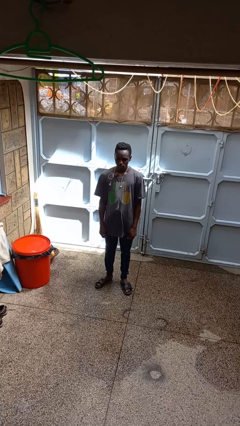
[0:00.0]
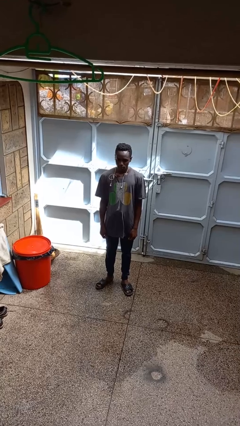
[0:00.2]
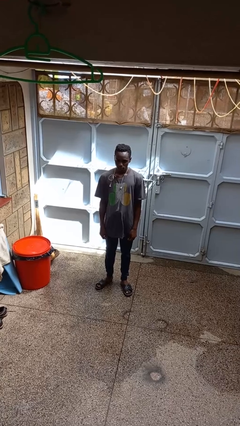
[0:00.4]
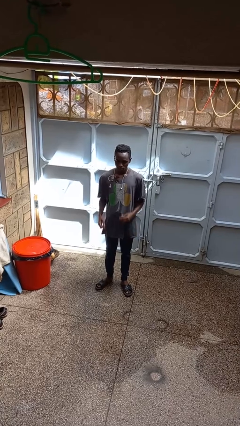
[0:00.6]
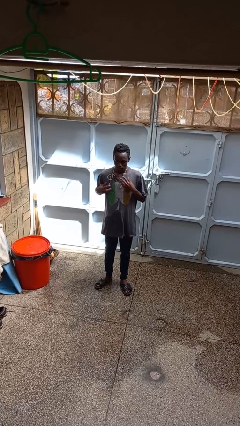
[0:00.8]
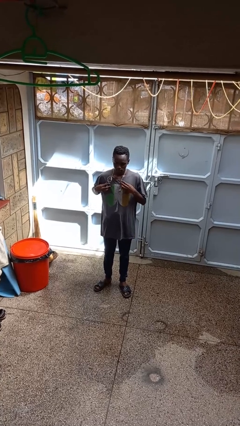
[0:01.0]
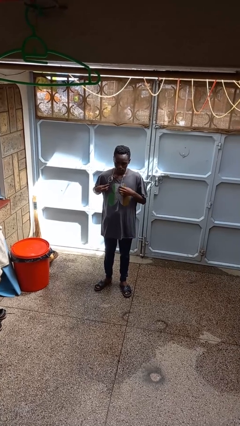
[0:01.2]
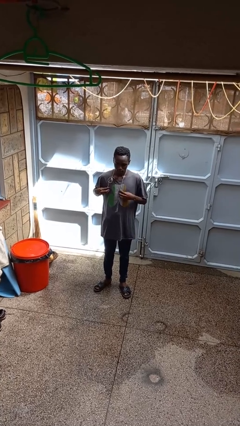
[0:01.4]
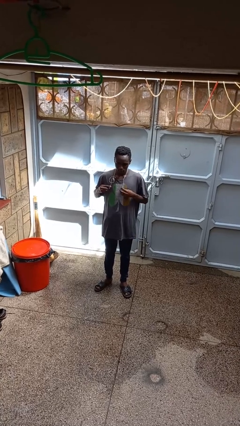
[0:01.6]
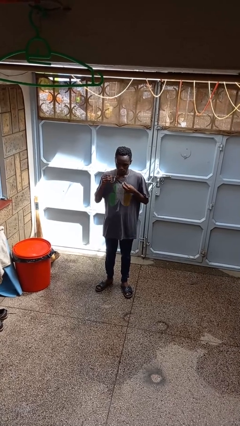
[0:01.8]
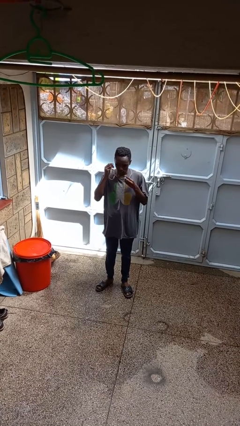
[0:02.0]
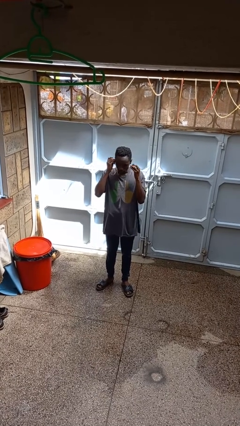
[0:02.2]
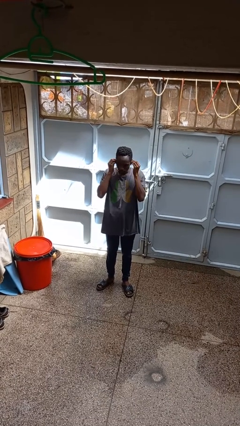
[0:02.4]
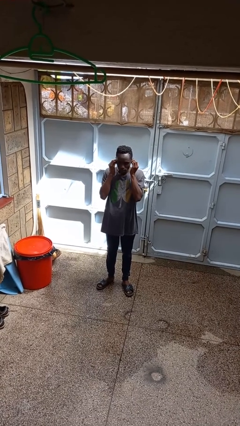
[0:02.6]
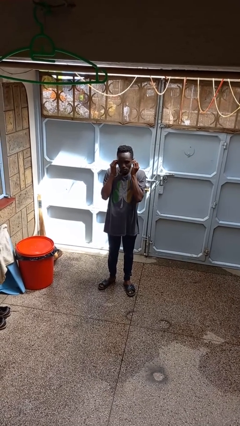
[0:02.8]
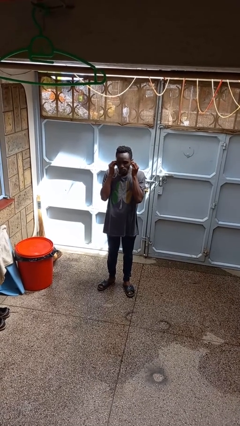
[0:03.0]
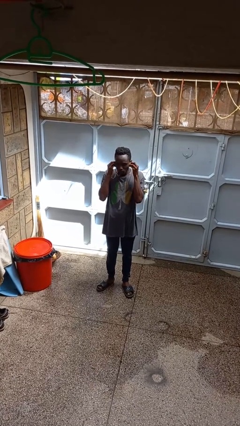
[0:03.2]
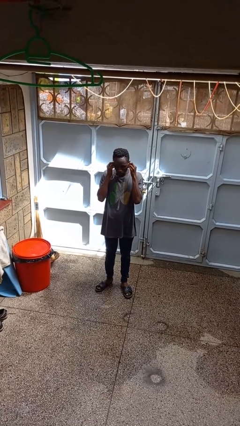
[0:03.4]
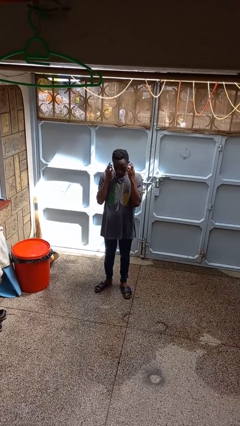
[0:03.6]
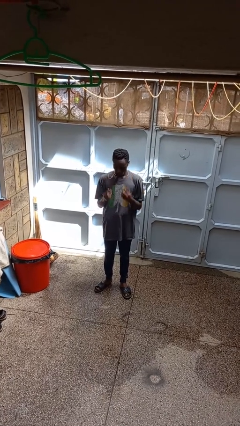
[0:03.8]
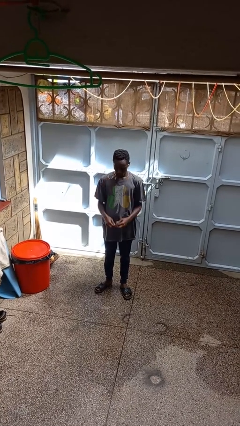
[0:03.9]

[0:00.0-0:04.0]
person puts on headphones

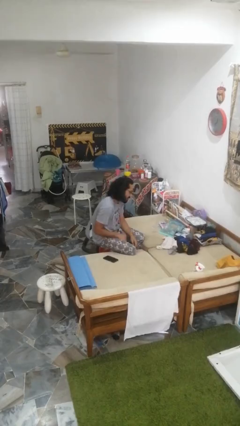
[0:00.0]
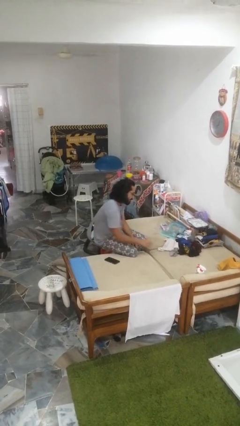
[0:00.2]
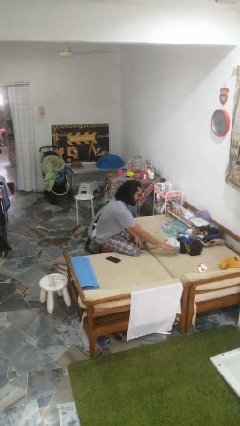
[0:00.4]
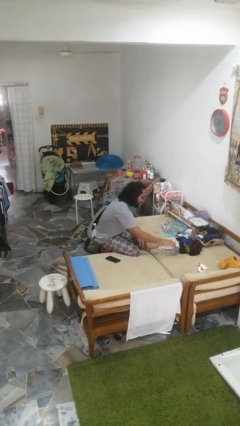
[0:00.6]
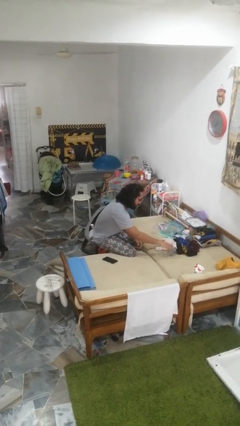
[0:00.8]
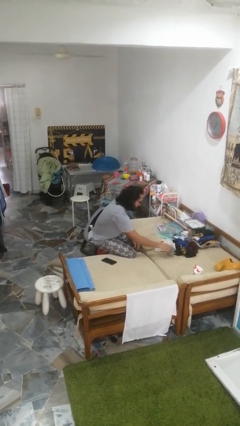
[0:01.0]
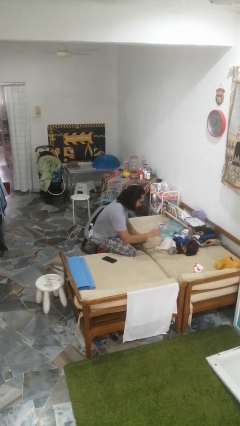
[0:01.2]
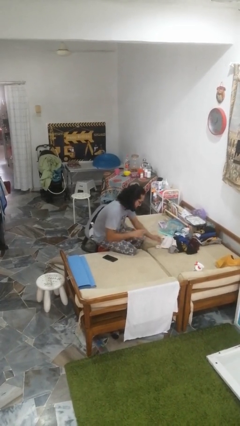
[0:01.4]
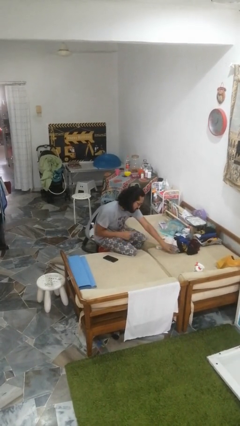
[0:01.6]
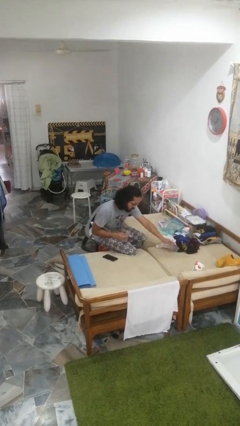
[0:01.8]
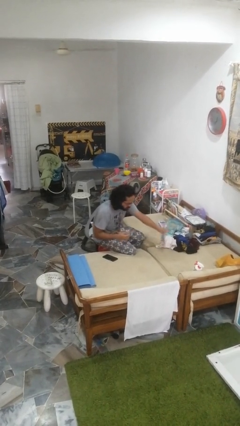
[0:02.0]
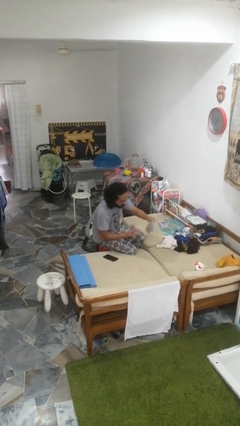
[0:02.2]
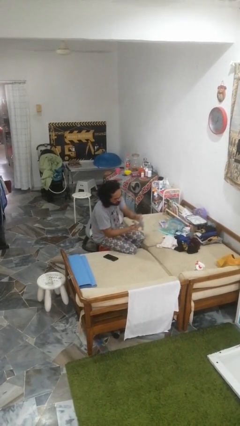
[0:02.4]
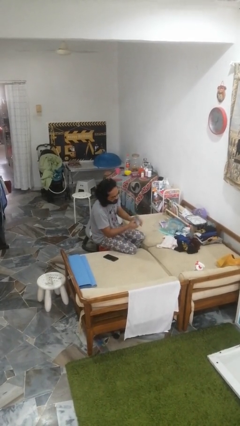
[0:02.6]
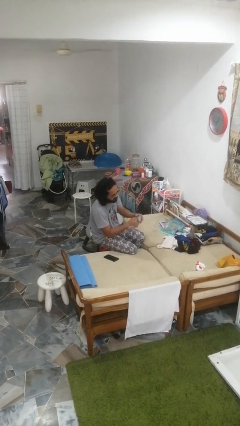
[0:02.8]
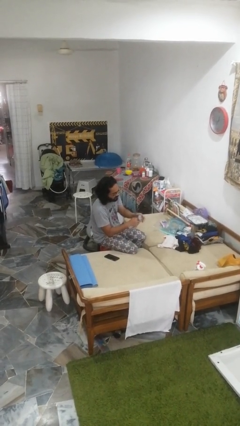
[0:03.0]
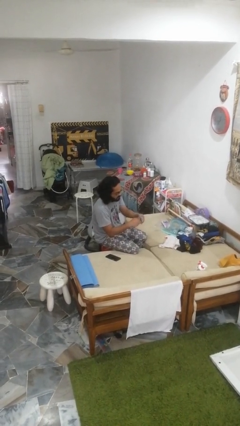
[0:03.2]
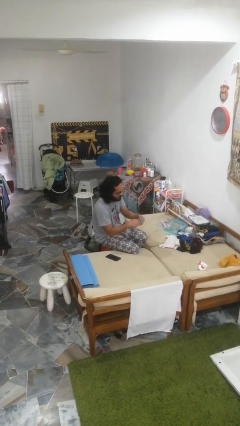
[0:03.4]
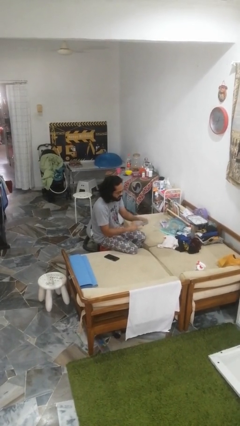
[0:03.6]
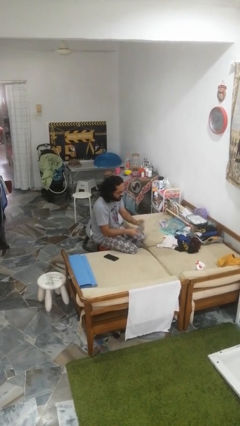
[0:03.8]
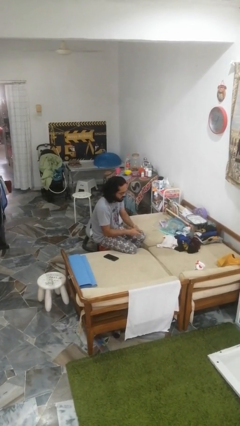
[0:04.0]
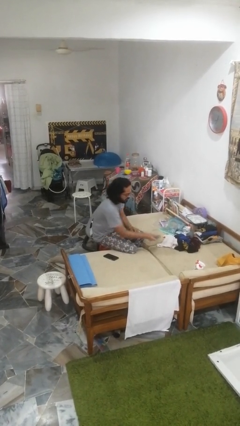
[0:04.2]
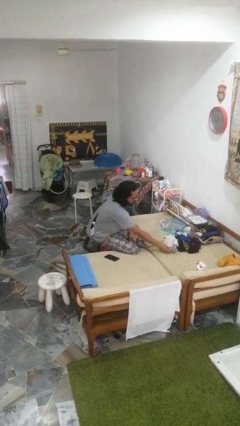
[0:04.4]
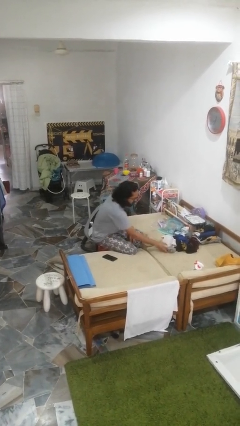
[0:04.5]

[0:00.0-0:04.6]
person folds socks

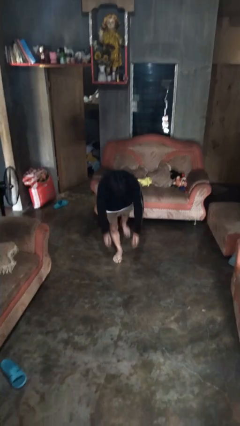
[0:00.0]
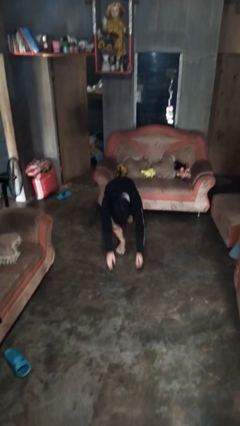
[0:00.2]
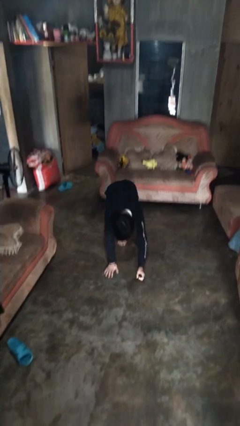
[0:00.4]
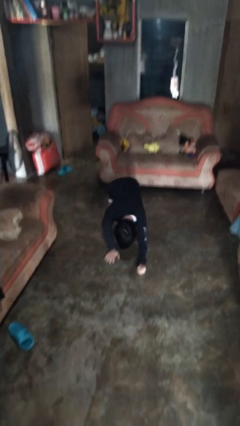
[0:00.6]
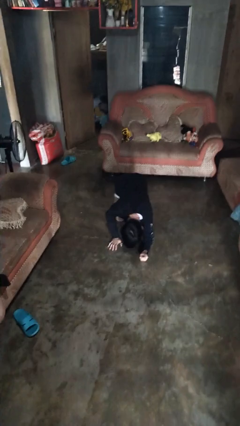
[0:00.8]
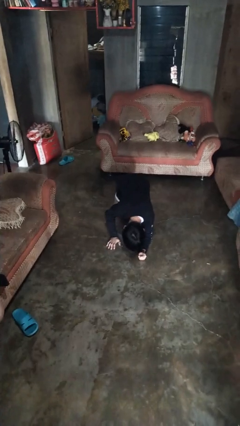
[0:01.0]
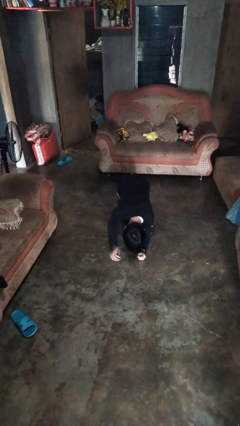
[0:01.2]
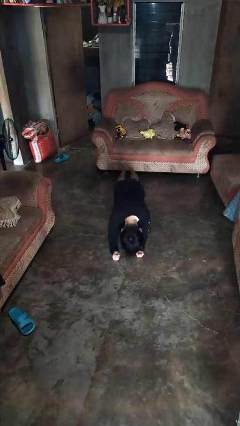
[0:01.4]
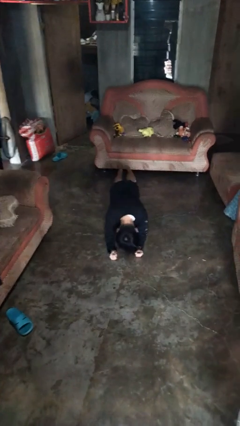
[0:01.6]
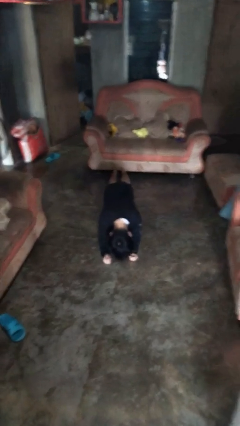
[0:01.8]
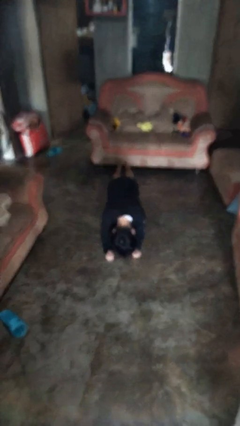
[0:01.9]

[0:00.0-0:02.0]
person exercises with plank

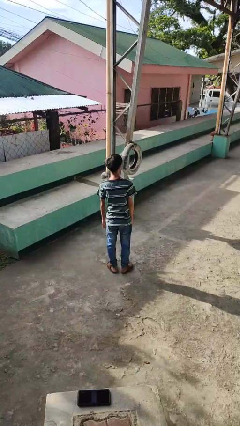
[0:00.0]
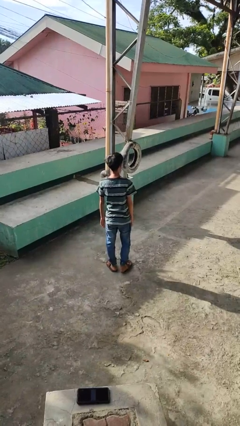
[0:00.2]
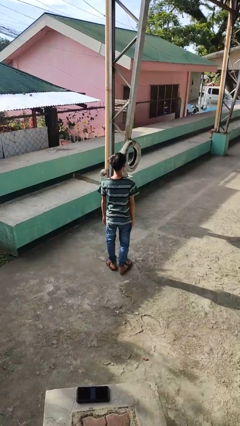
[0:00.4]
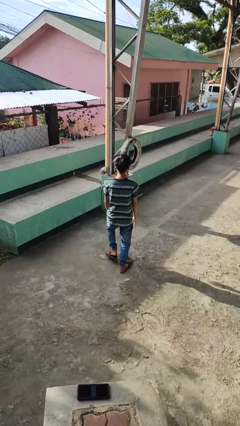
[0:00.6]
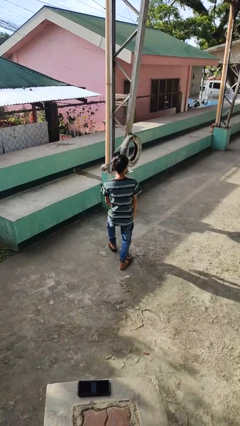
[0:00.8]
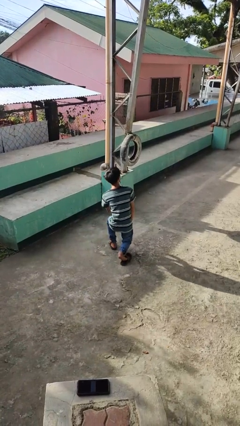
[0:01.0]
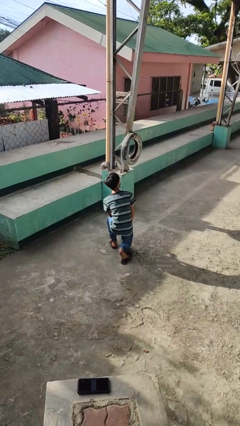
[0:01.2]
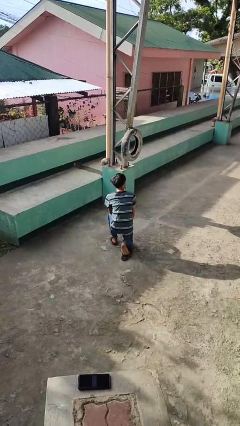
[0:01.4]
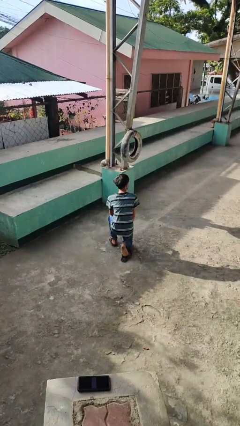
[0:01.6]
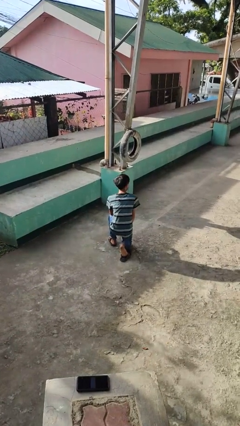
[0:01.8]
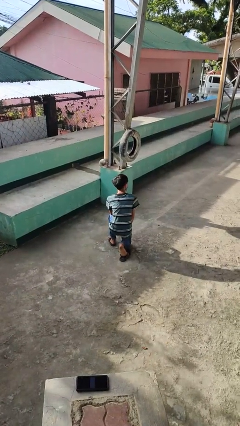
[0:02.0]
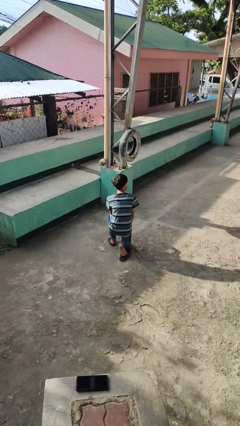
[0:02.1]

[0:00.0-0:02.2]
person kneels

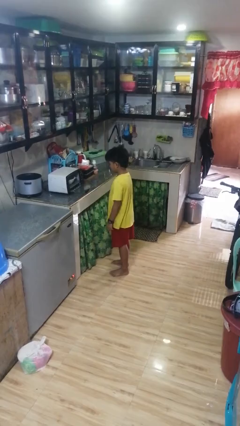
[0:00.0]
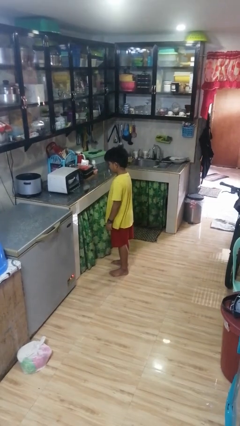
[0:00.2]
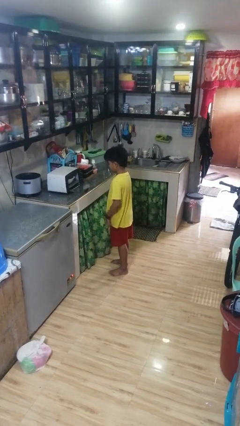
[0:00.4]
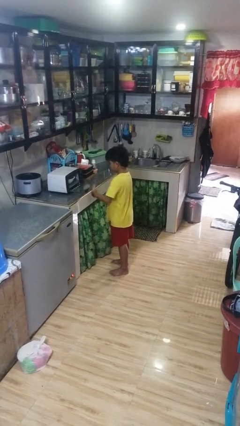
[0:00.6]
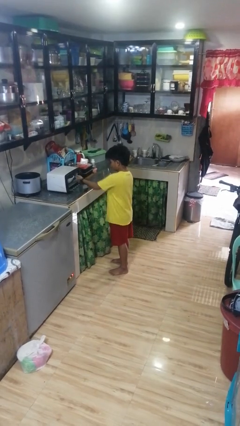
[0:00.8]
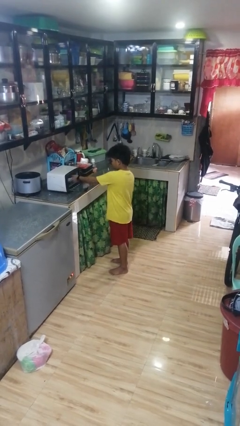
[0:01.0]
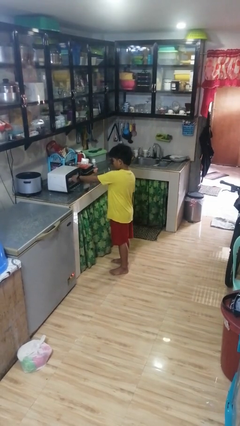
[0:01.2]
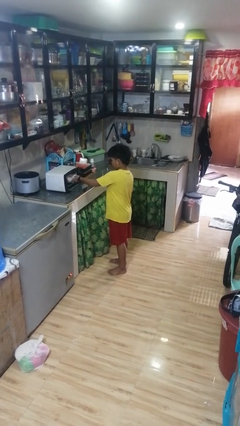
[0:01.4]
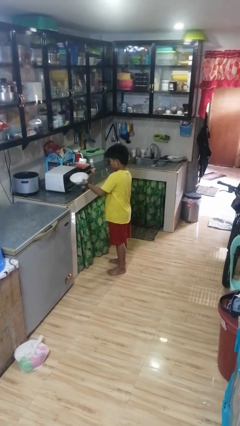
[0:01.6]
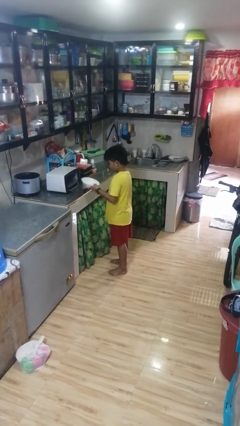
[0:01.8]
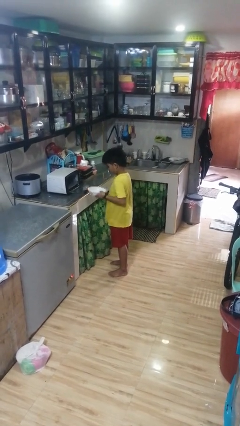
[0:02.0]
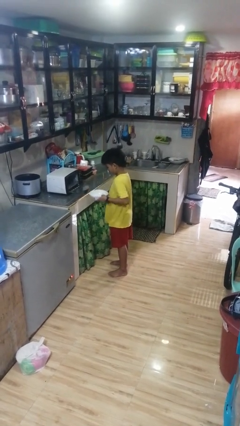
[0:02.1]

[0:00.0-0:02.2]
person takes object from microwave

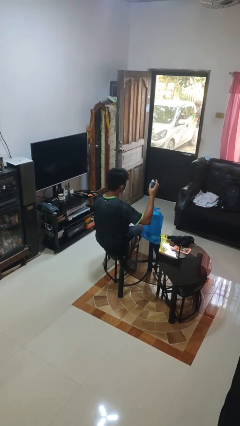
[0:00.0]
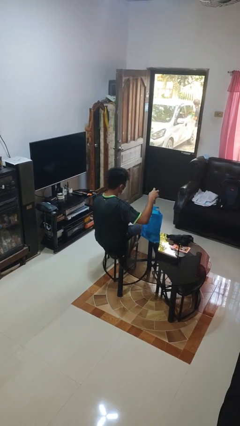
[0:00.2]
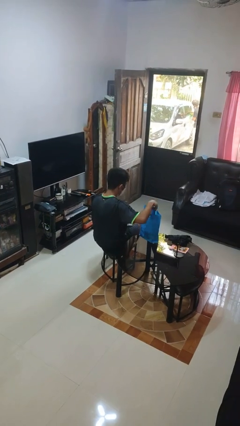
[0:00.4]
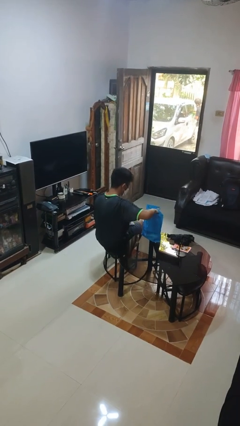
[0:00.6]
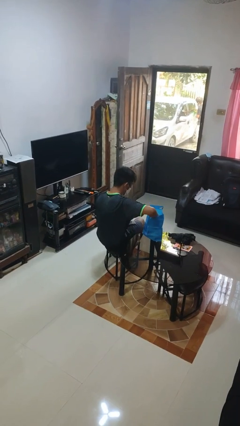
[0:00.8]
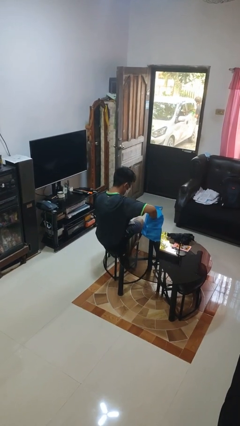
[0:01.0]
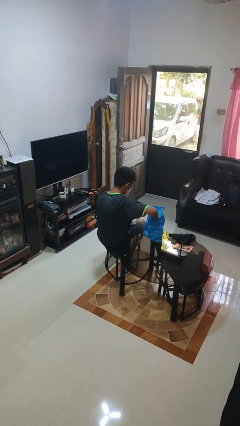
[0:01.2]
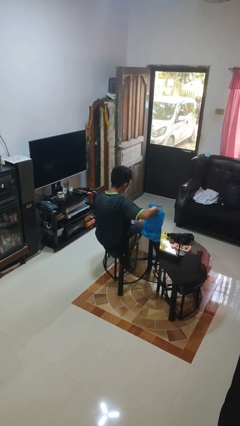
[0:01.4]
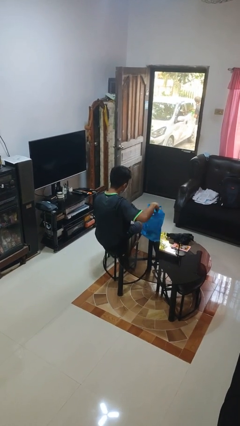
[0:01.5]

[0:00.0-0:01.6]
person puts object into bag

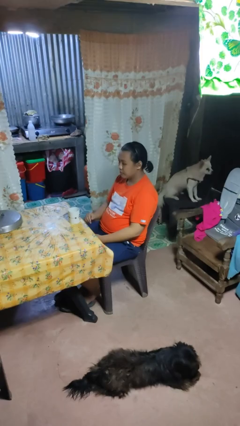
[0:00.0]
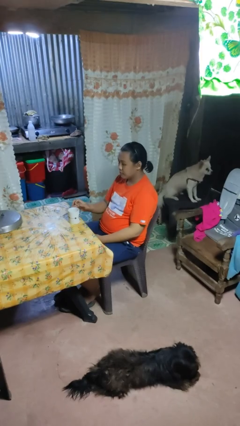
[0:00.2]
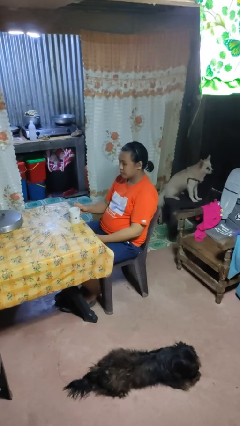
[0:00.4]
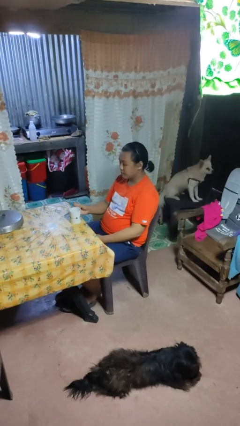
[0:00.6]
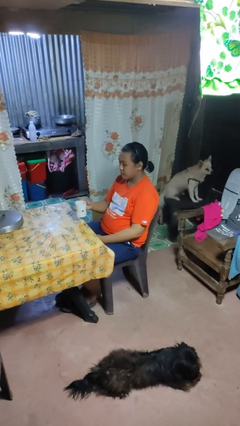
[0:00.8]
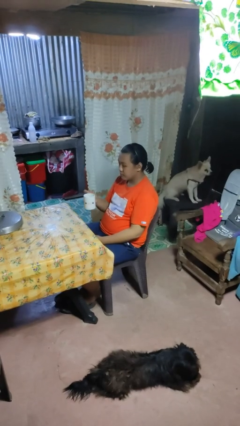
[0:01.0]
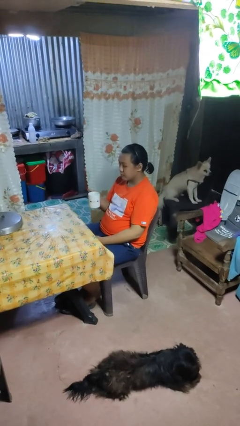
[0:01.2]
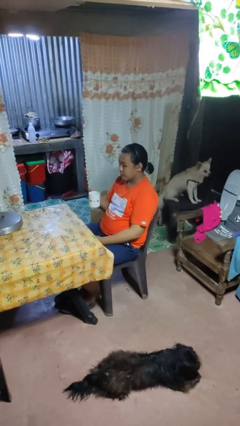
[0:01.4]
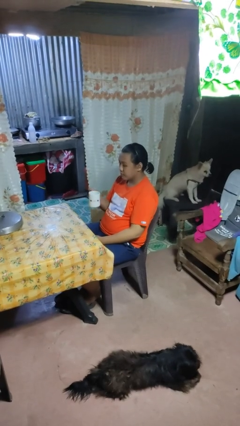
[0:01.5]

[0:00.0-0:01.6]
person picks up object from table
